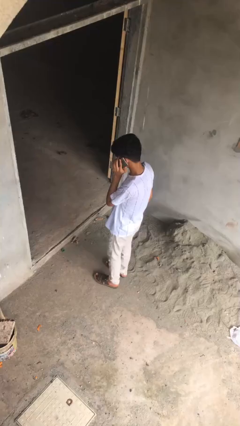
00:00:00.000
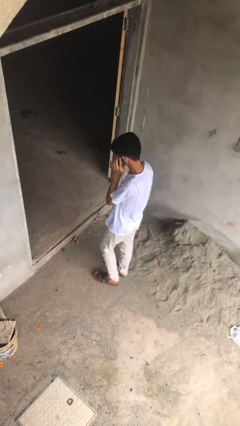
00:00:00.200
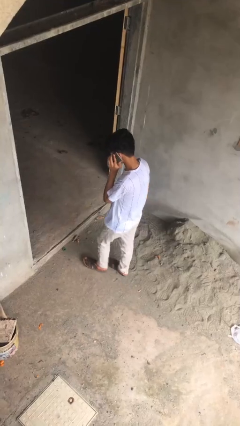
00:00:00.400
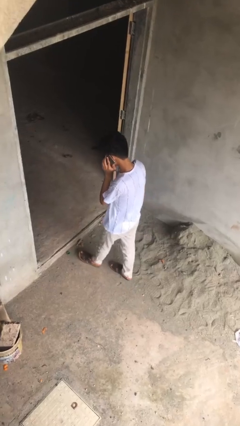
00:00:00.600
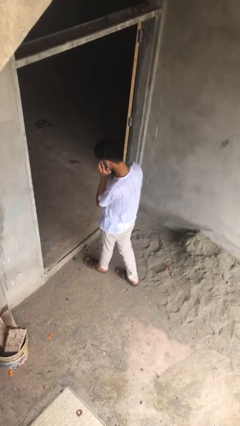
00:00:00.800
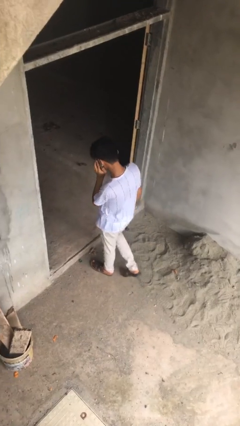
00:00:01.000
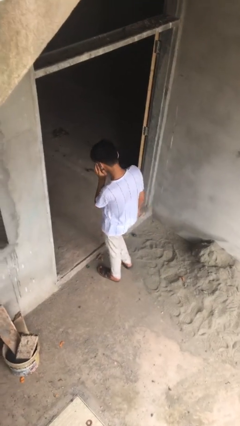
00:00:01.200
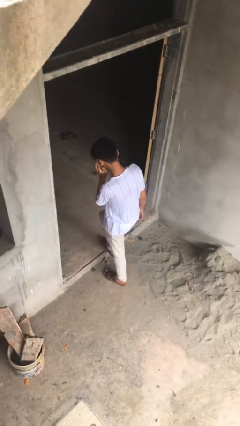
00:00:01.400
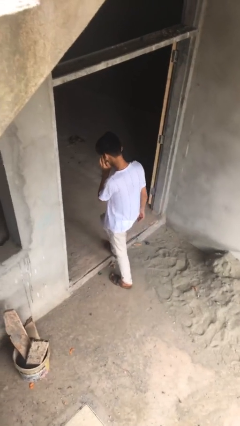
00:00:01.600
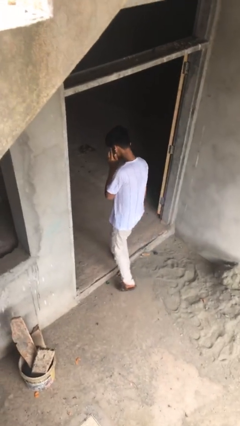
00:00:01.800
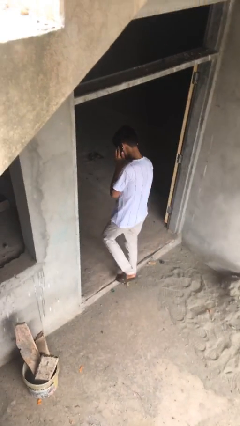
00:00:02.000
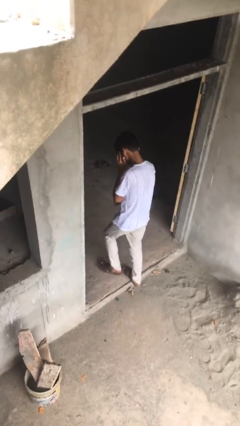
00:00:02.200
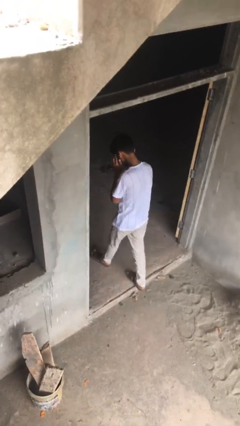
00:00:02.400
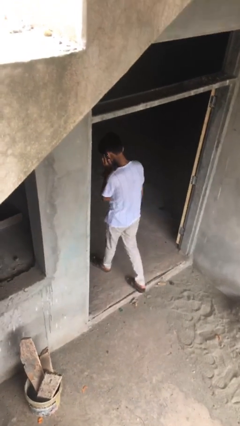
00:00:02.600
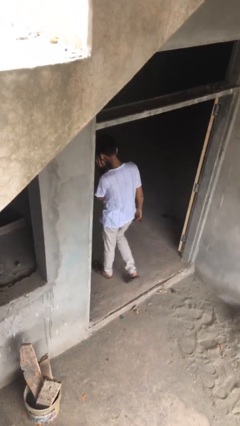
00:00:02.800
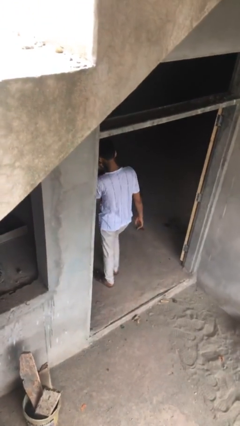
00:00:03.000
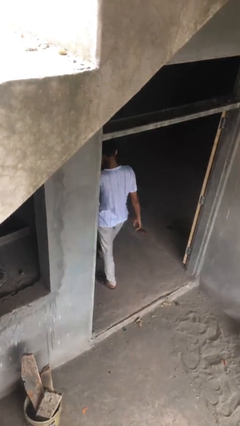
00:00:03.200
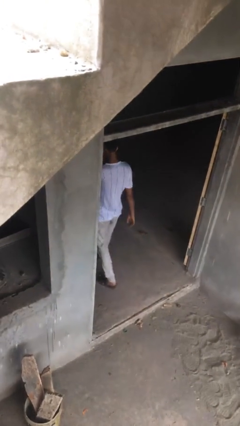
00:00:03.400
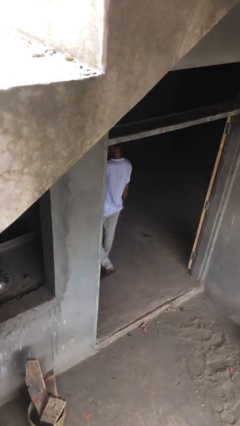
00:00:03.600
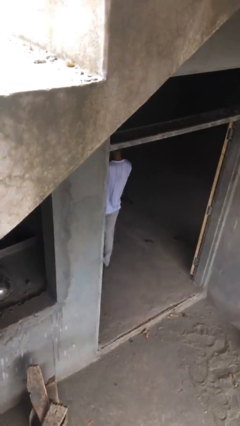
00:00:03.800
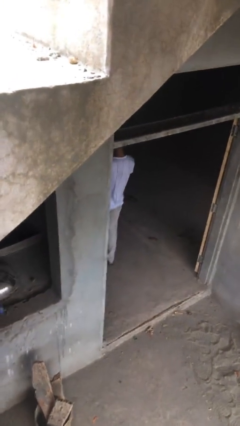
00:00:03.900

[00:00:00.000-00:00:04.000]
person exits scene through structure

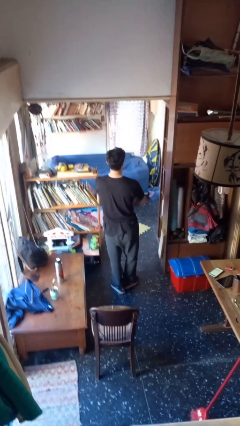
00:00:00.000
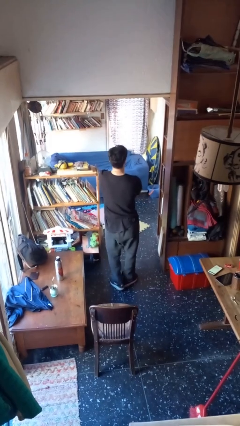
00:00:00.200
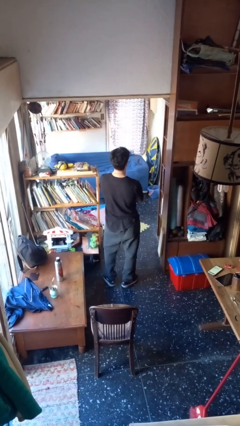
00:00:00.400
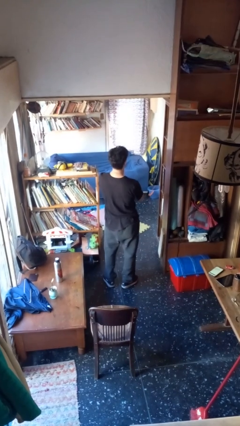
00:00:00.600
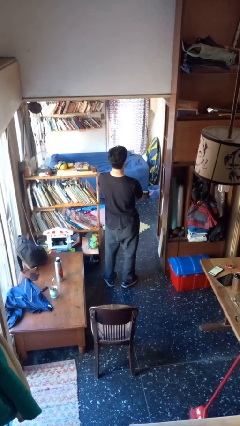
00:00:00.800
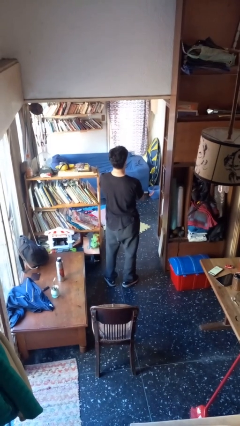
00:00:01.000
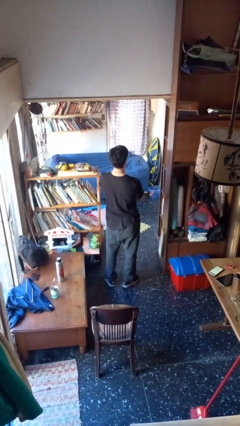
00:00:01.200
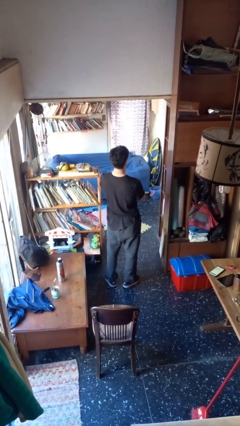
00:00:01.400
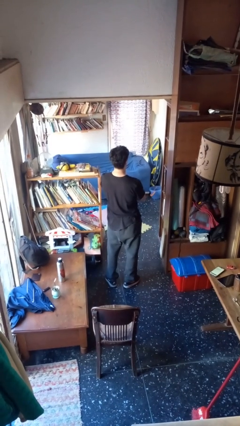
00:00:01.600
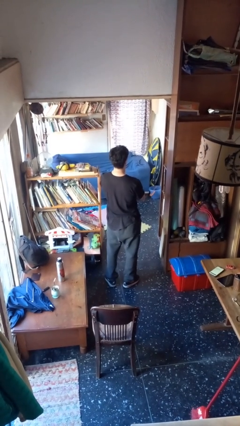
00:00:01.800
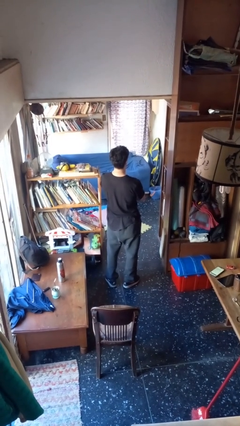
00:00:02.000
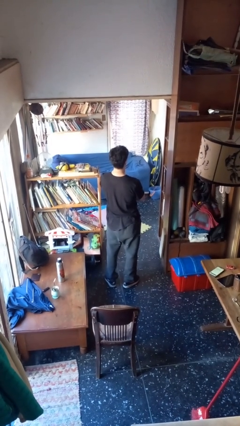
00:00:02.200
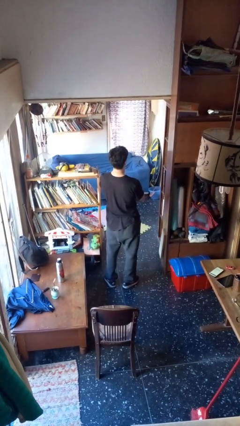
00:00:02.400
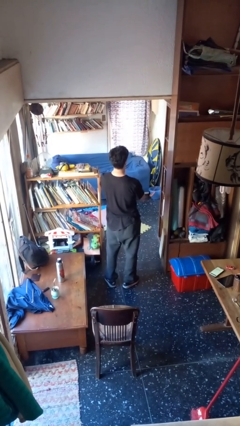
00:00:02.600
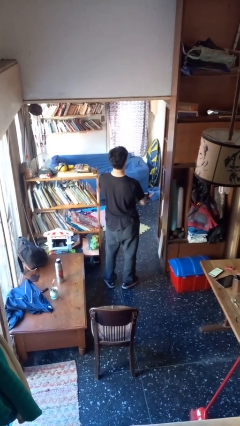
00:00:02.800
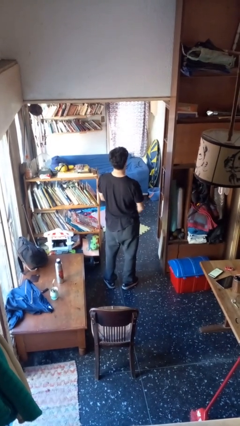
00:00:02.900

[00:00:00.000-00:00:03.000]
person crosses arms

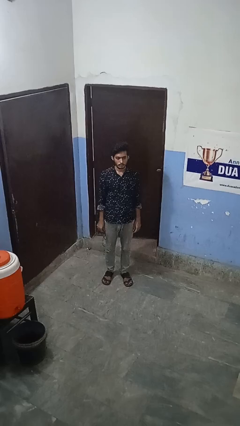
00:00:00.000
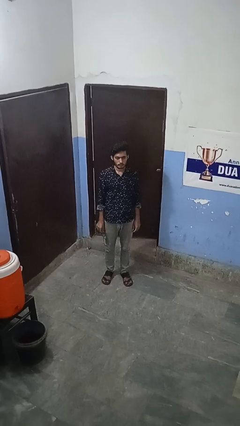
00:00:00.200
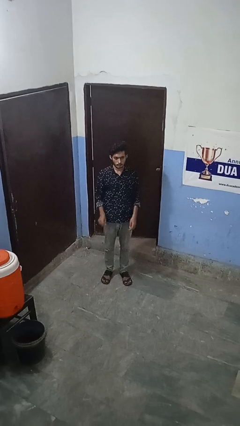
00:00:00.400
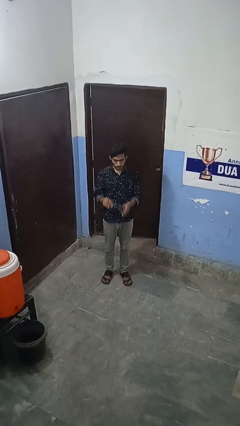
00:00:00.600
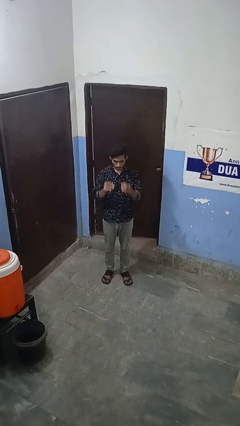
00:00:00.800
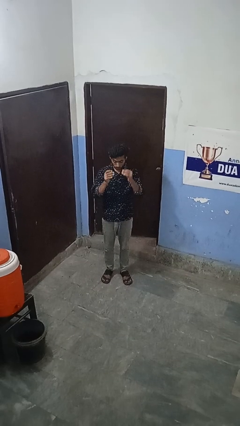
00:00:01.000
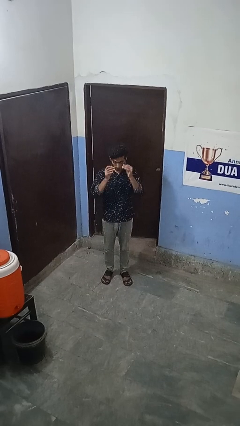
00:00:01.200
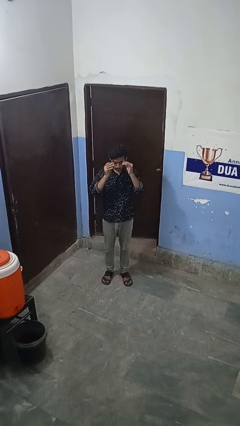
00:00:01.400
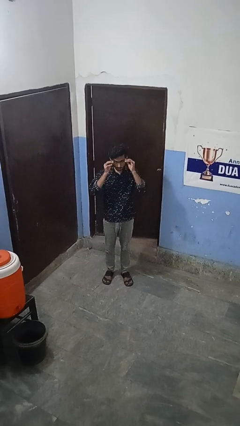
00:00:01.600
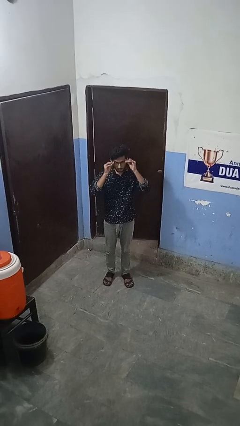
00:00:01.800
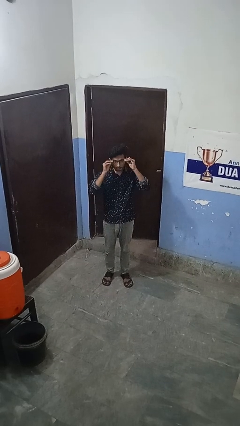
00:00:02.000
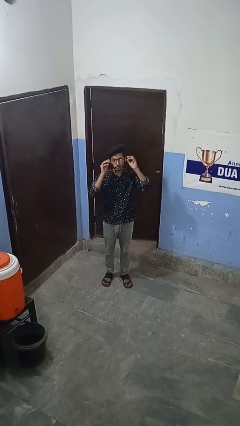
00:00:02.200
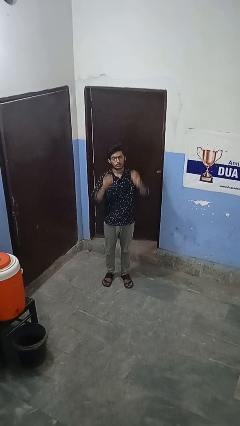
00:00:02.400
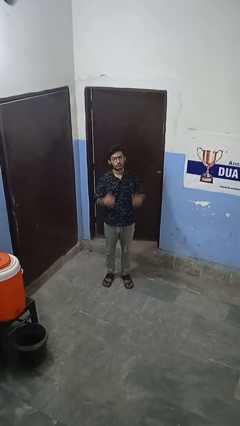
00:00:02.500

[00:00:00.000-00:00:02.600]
person puts on glasses

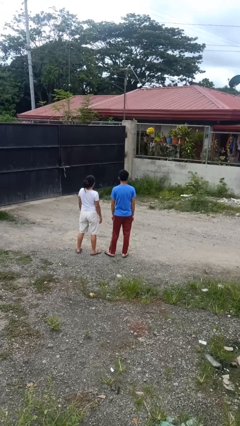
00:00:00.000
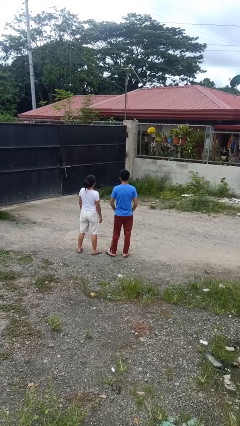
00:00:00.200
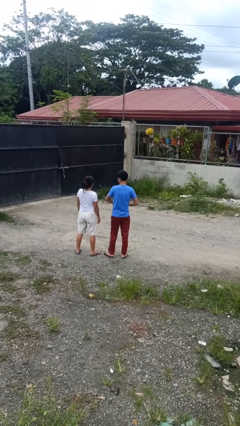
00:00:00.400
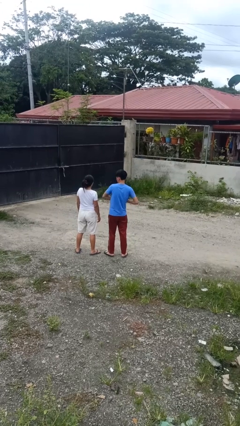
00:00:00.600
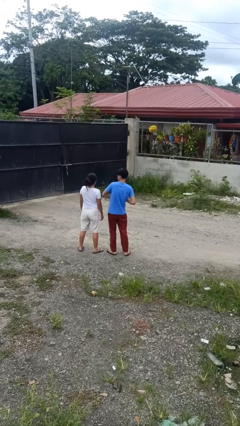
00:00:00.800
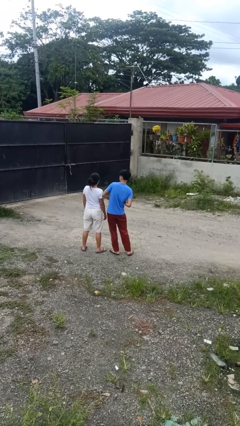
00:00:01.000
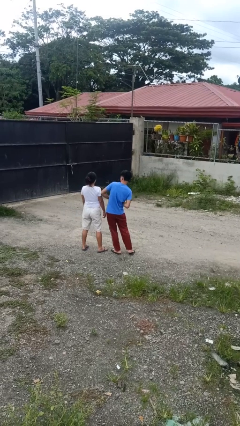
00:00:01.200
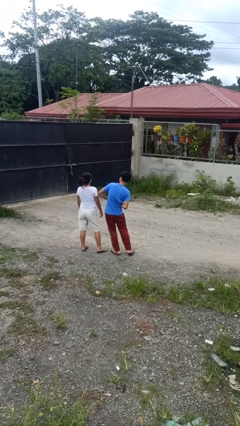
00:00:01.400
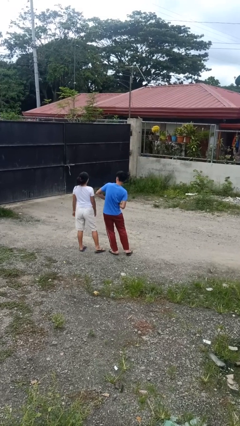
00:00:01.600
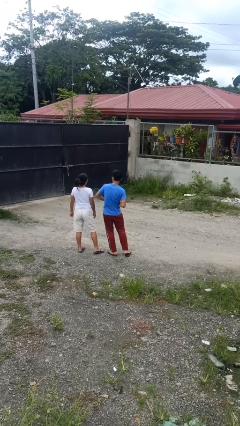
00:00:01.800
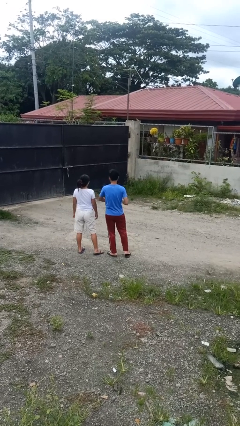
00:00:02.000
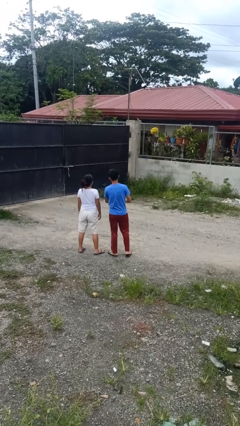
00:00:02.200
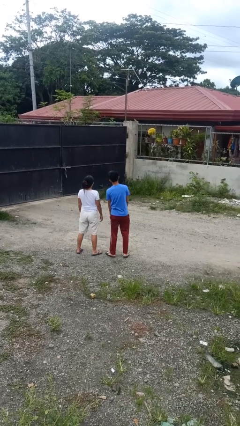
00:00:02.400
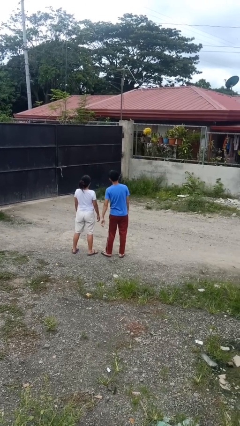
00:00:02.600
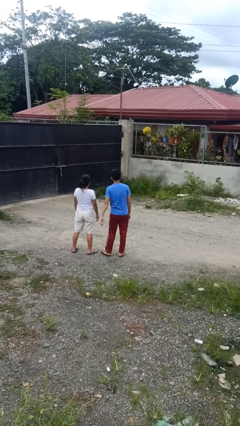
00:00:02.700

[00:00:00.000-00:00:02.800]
person nudges person with elbow

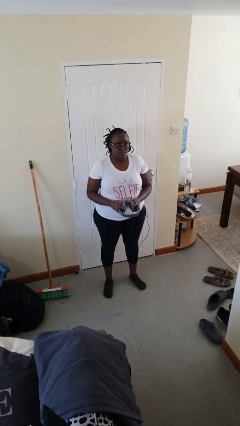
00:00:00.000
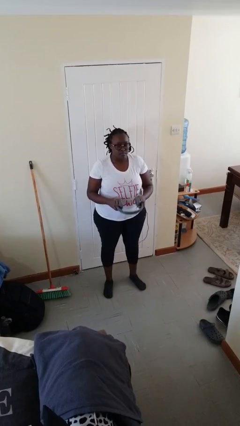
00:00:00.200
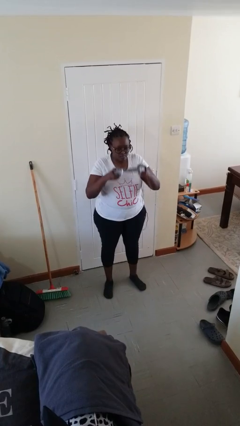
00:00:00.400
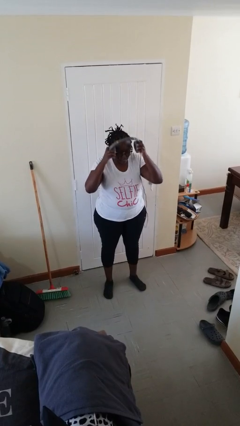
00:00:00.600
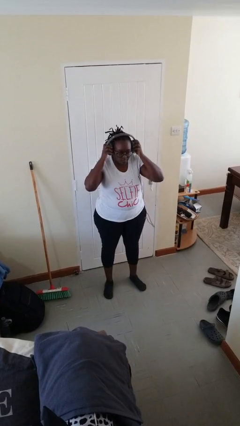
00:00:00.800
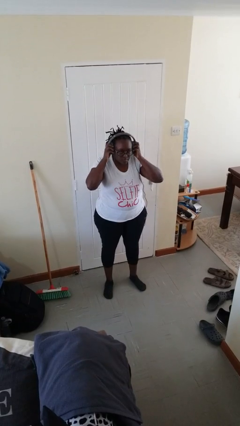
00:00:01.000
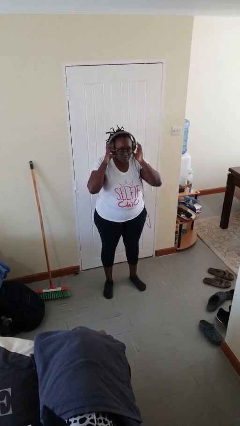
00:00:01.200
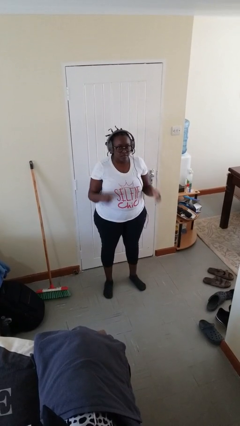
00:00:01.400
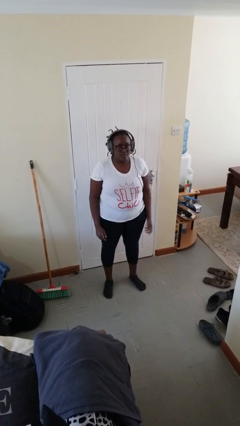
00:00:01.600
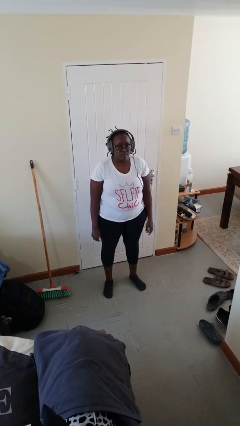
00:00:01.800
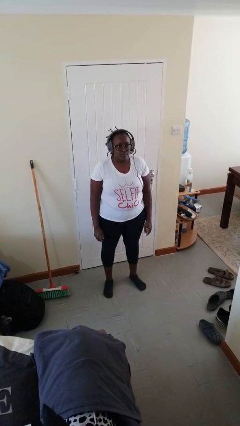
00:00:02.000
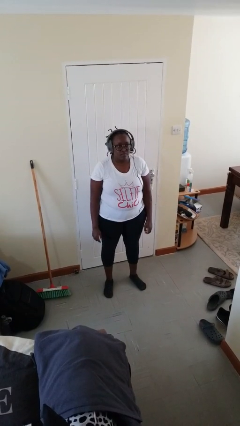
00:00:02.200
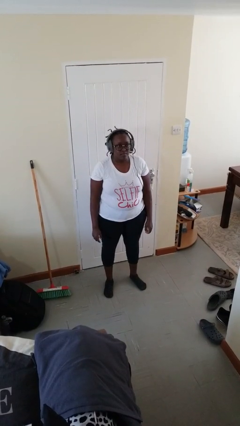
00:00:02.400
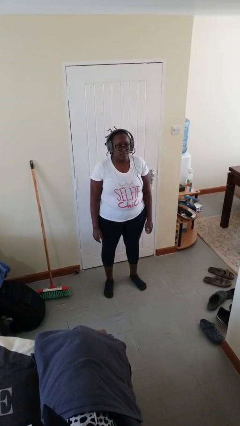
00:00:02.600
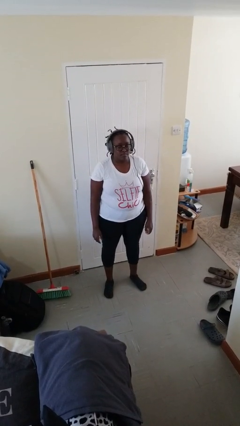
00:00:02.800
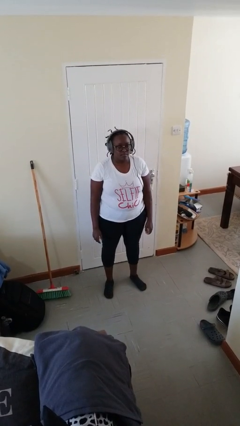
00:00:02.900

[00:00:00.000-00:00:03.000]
person puts on headphones

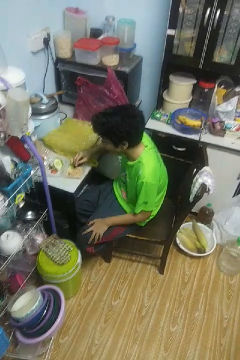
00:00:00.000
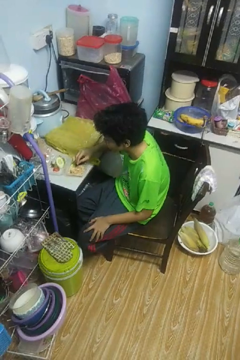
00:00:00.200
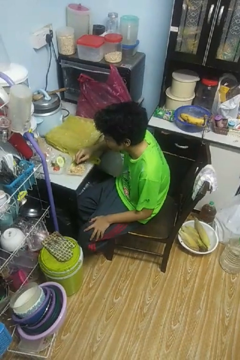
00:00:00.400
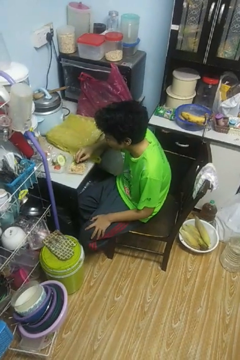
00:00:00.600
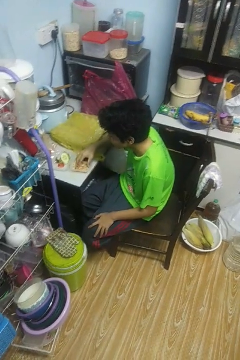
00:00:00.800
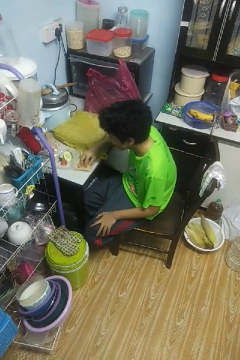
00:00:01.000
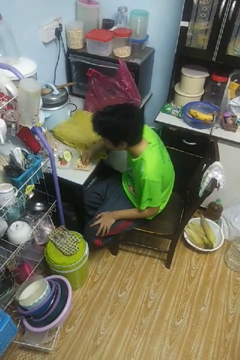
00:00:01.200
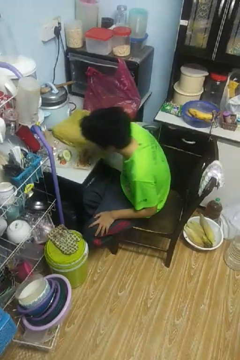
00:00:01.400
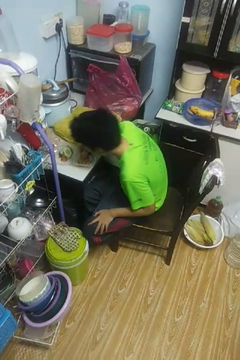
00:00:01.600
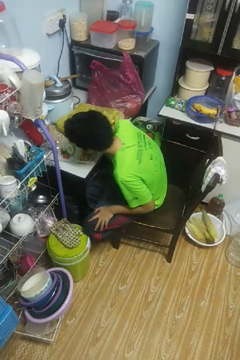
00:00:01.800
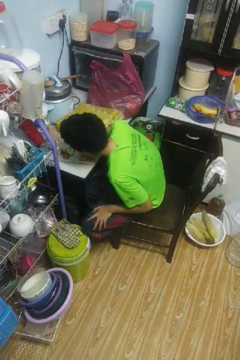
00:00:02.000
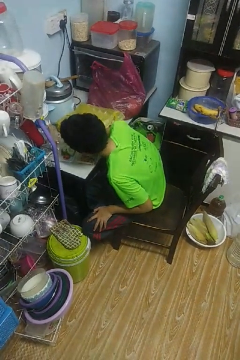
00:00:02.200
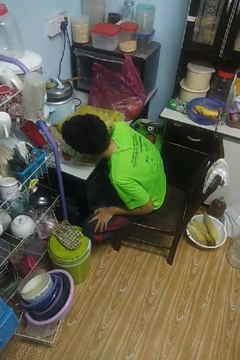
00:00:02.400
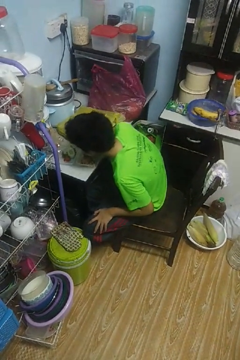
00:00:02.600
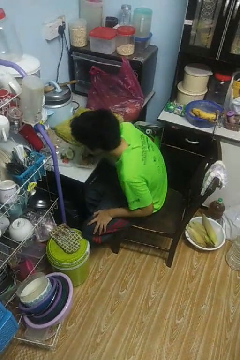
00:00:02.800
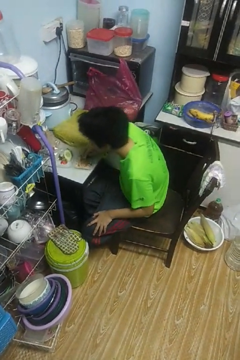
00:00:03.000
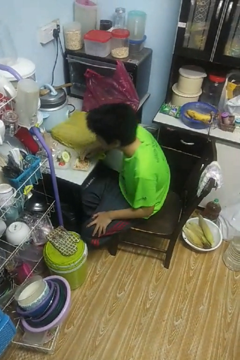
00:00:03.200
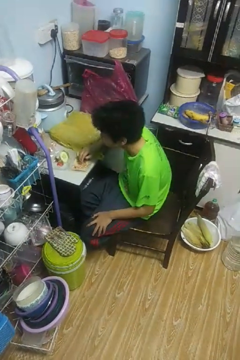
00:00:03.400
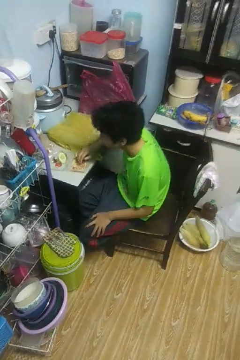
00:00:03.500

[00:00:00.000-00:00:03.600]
person eats with hands
